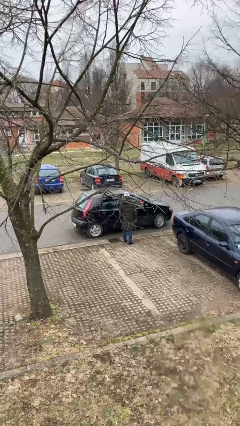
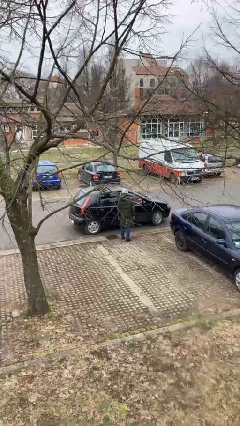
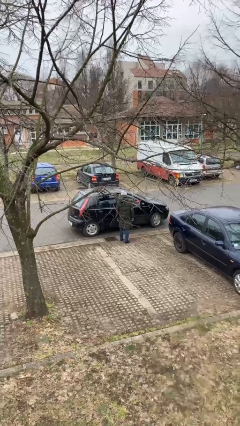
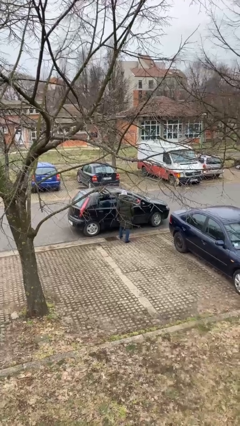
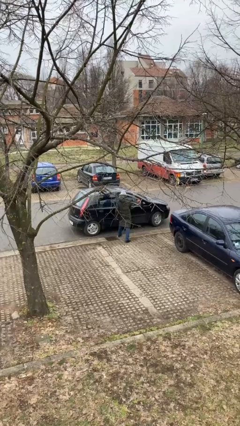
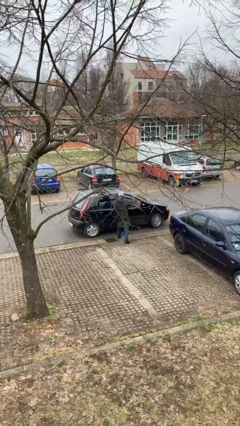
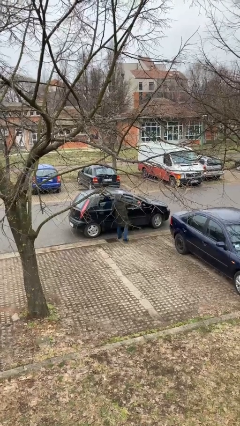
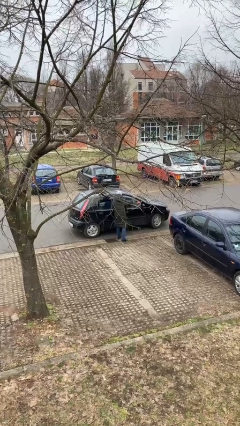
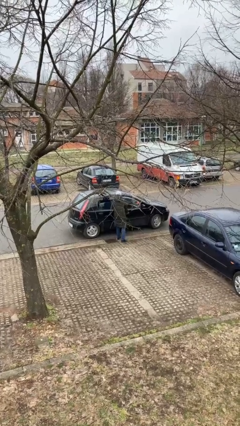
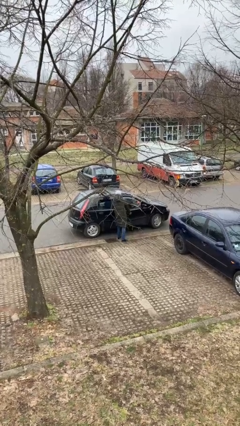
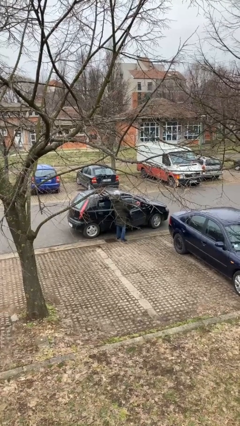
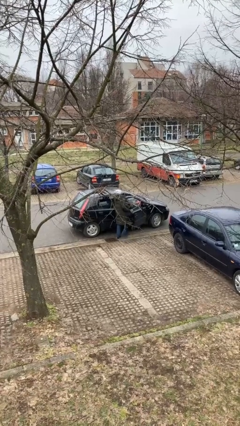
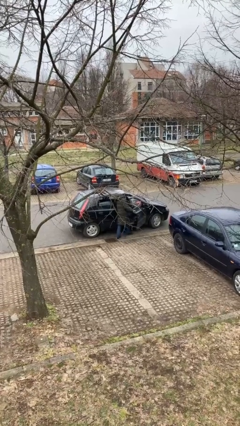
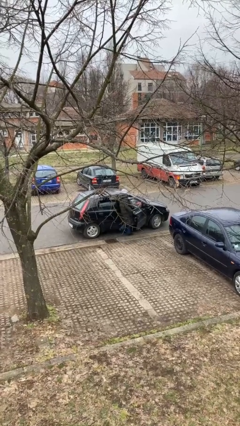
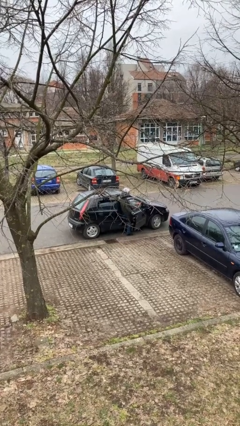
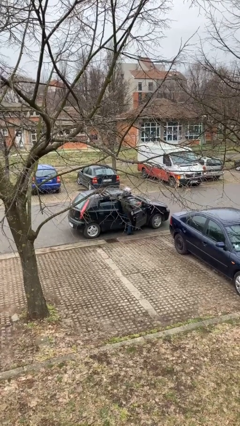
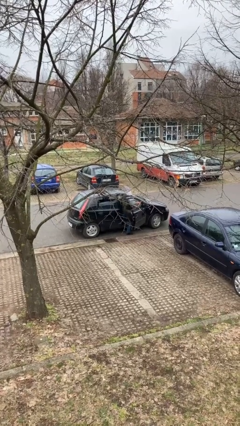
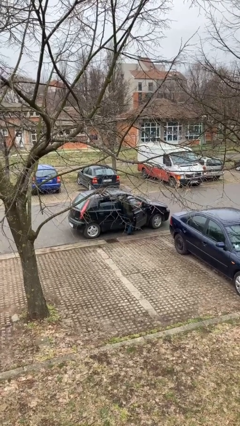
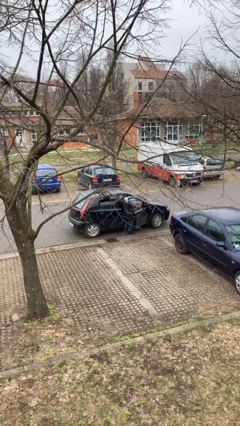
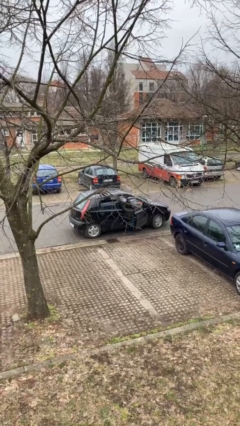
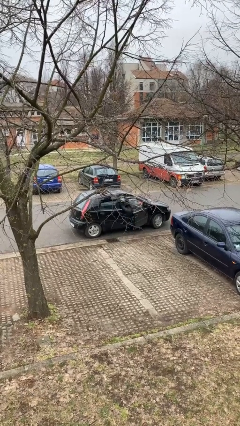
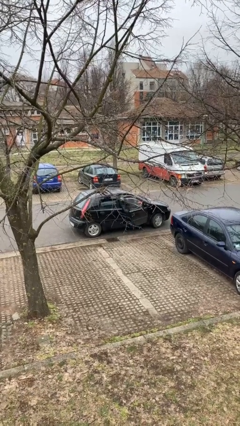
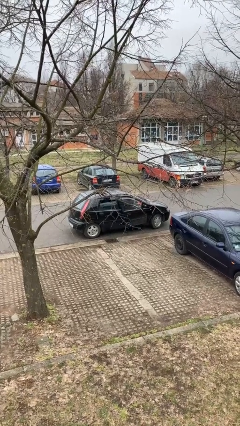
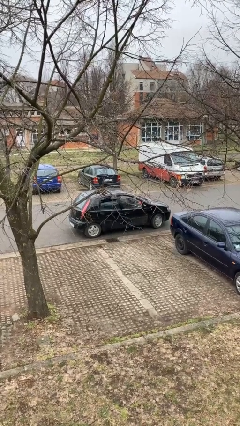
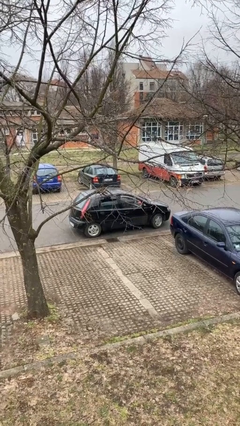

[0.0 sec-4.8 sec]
car picks up person

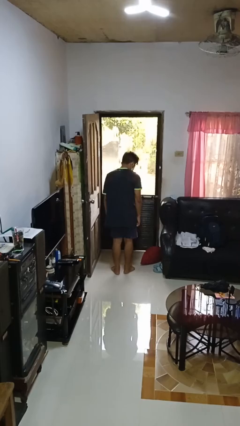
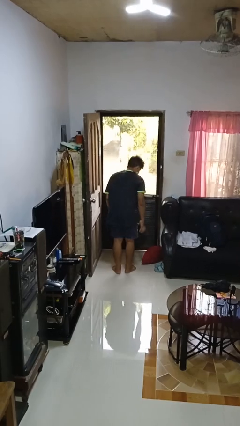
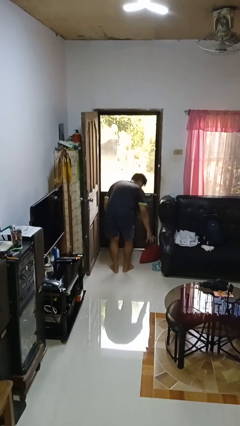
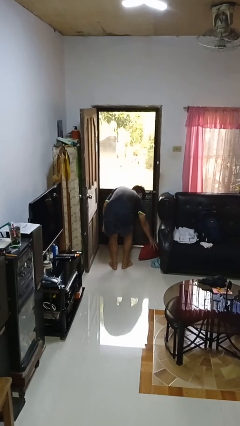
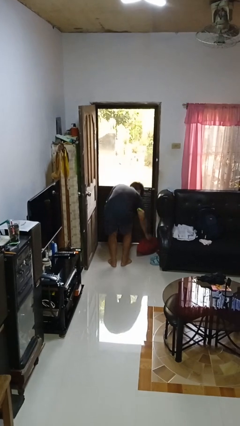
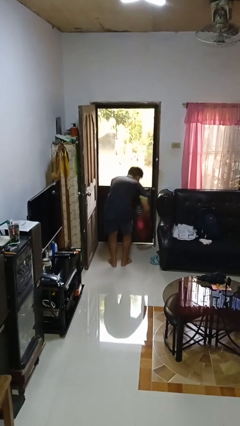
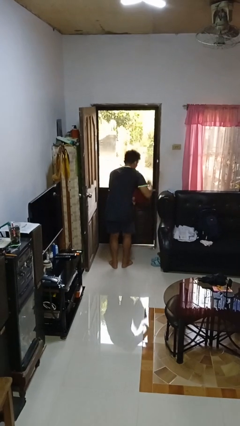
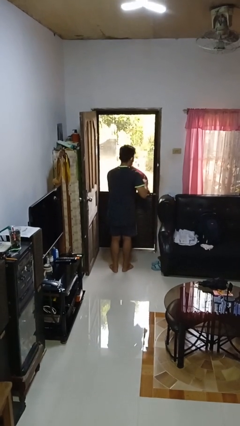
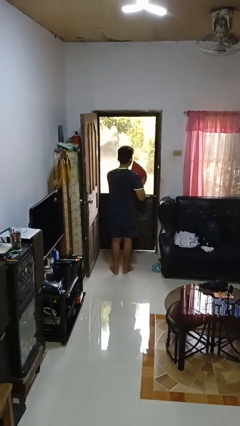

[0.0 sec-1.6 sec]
person picks up object from floor

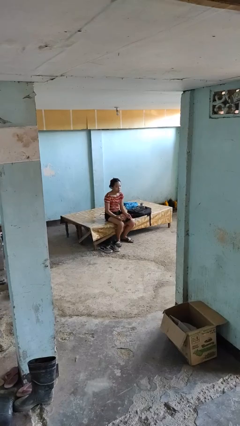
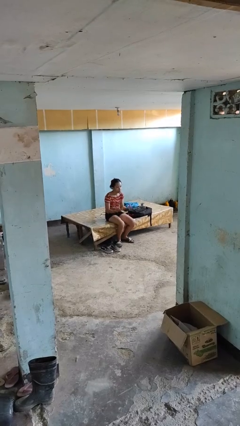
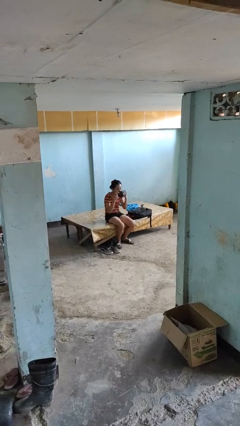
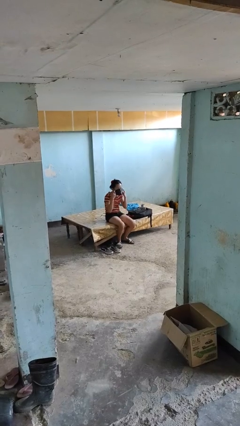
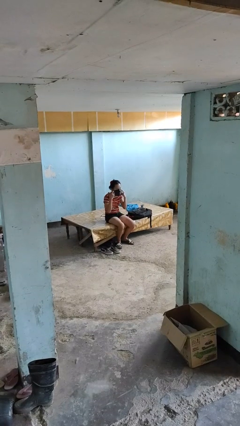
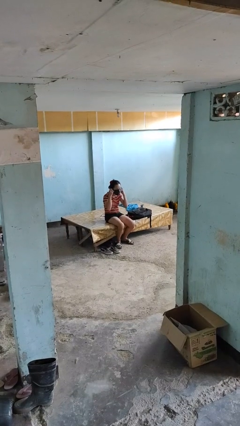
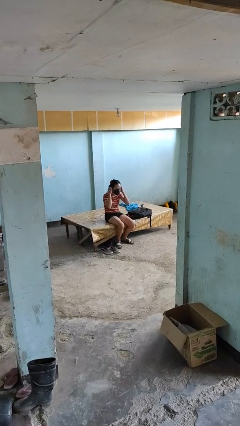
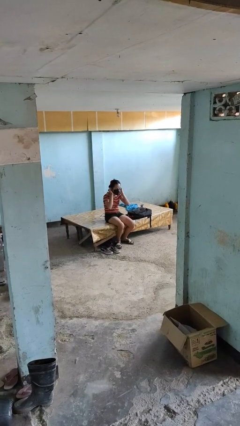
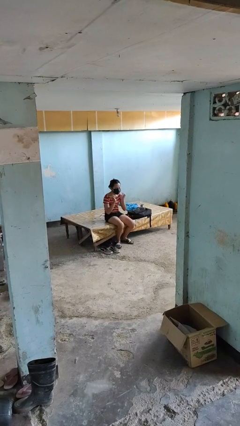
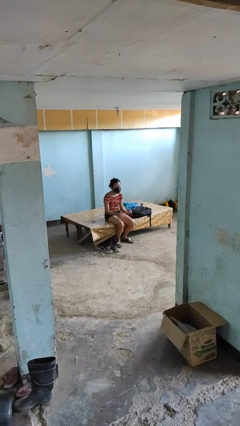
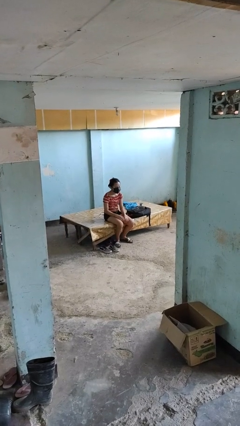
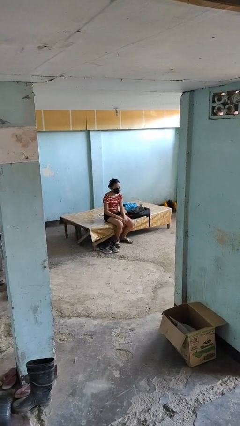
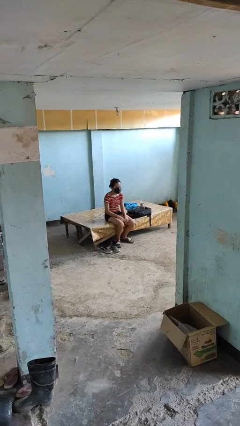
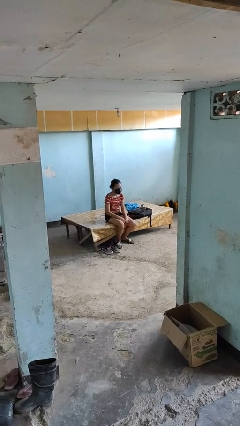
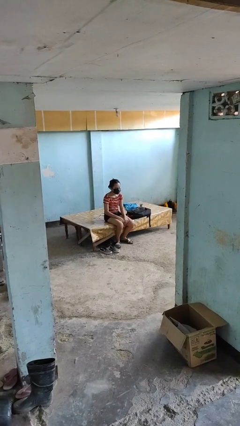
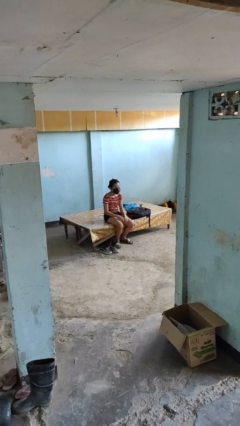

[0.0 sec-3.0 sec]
person puts on facemask

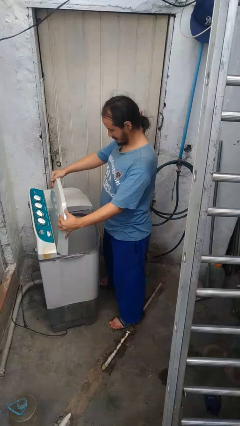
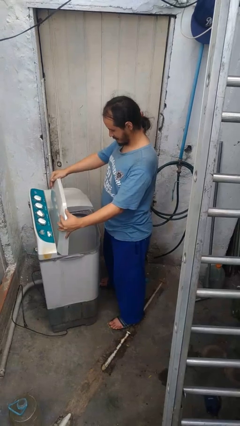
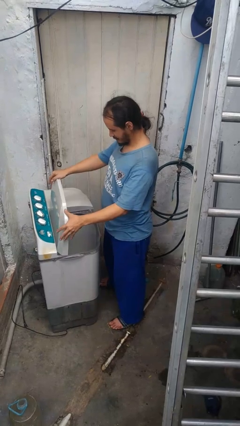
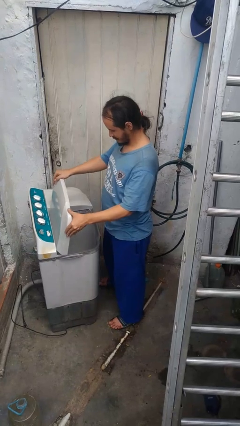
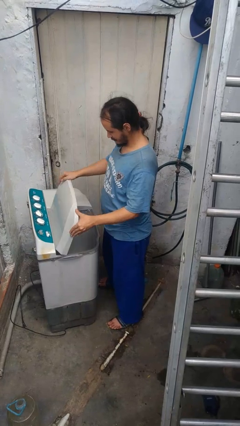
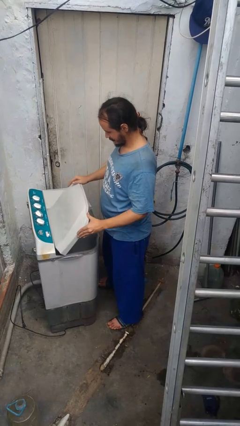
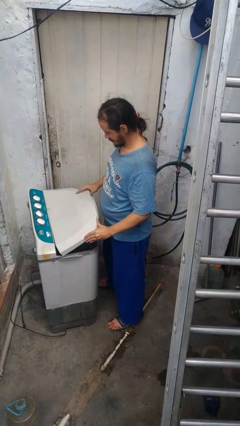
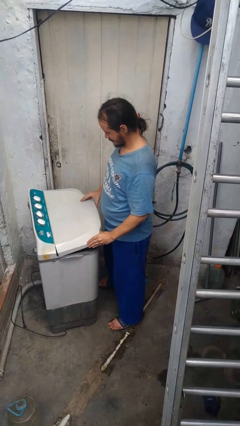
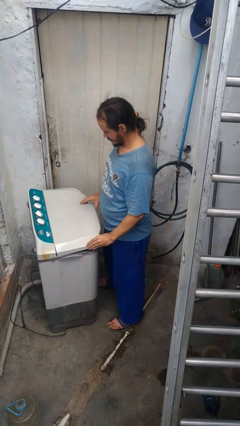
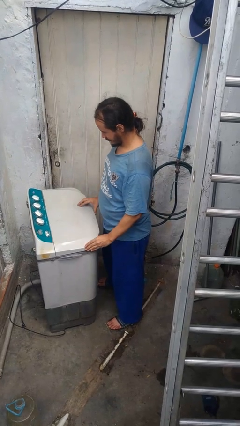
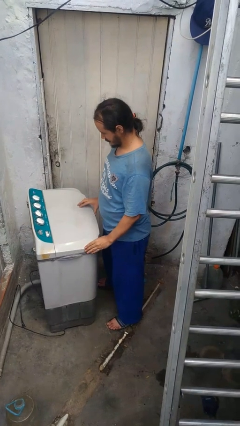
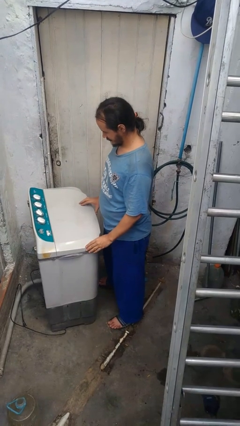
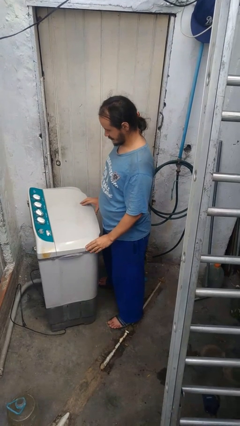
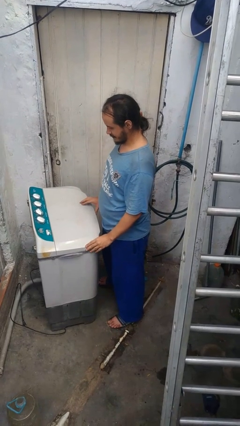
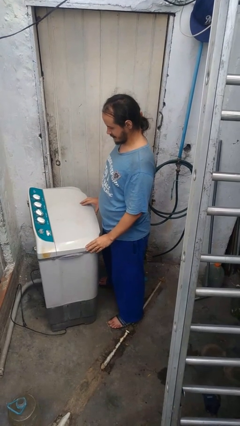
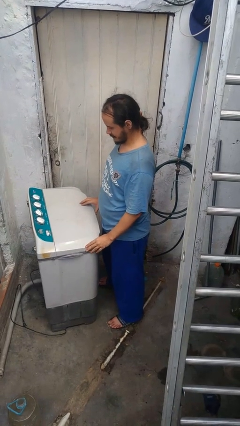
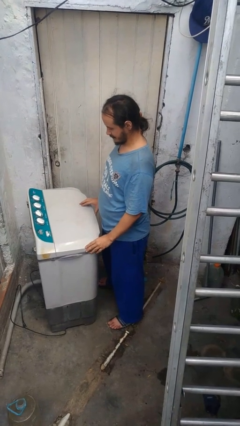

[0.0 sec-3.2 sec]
person closes clothes washer

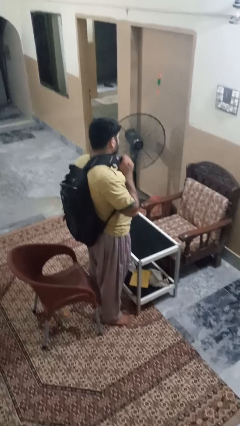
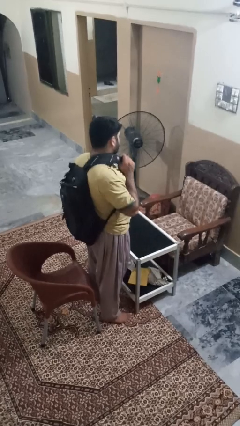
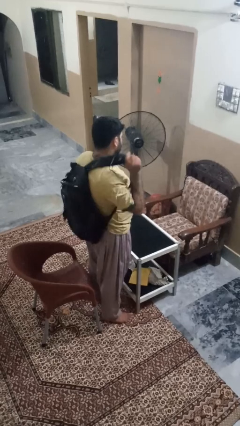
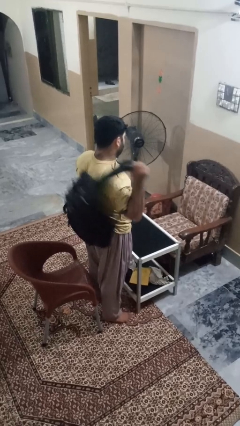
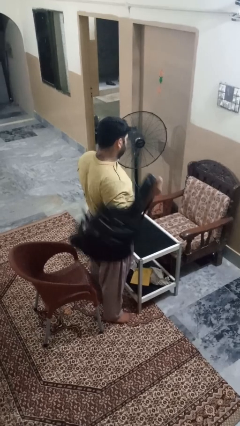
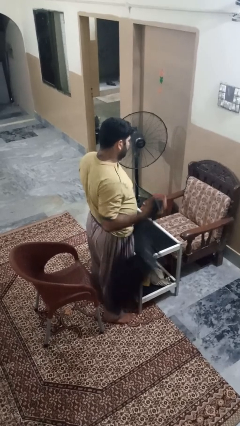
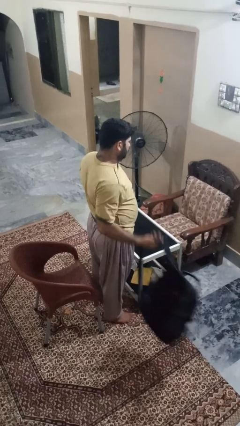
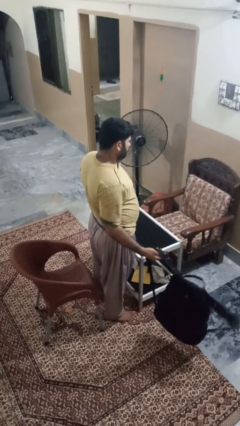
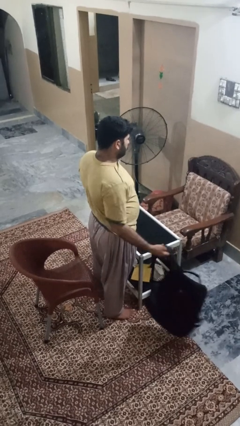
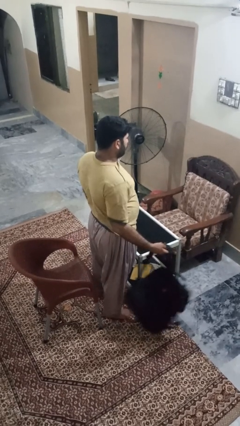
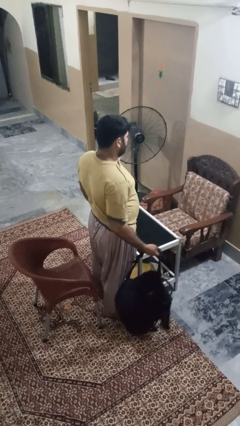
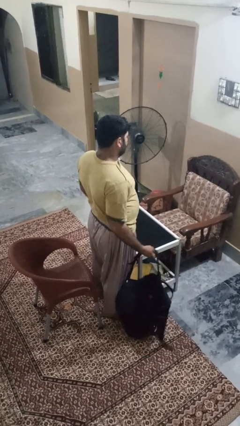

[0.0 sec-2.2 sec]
person takes off backpack

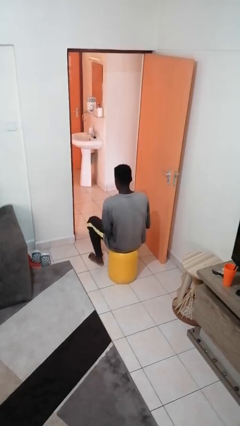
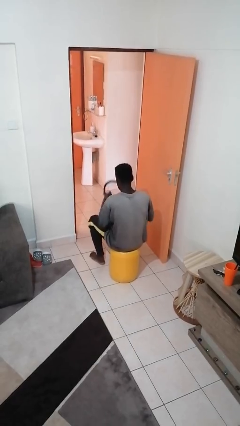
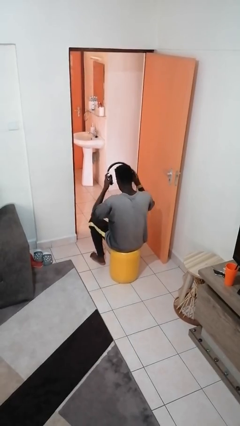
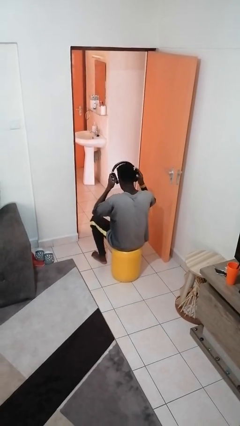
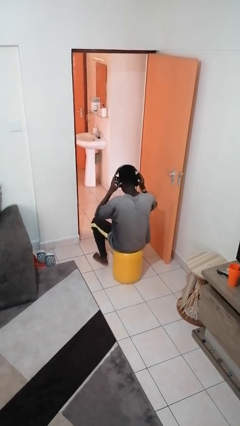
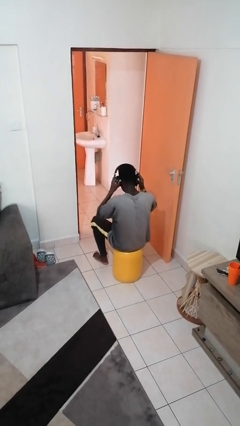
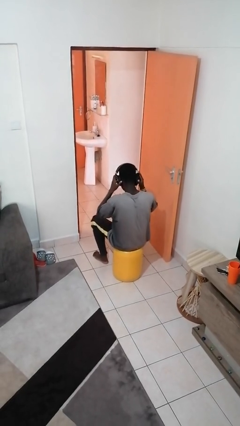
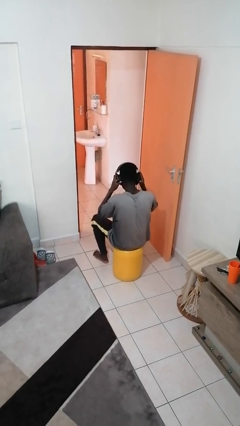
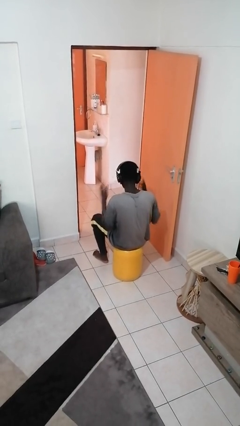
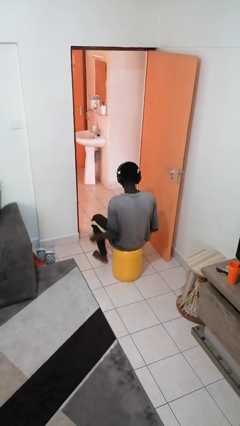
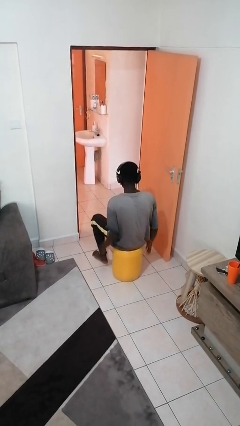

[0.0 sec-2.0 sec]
person puts on headphones

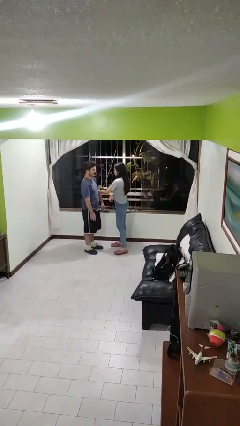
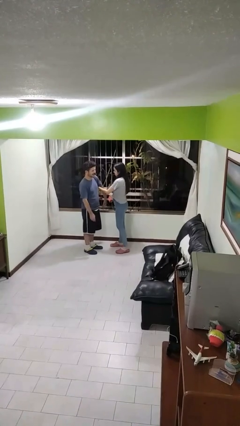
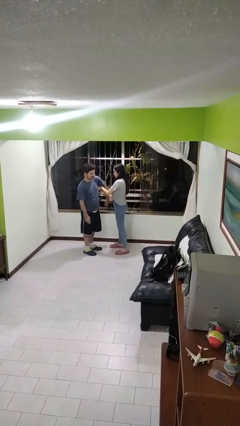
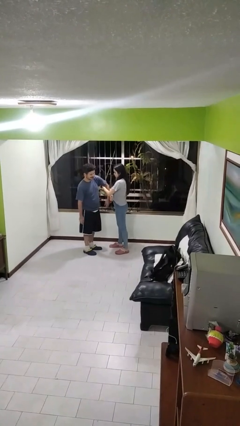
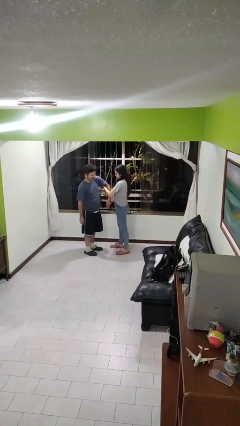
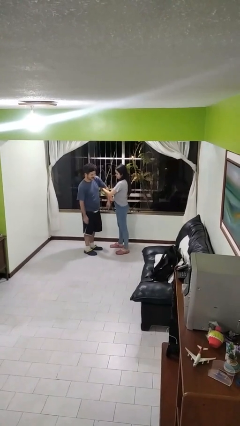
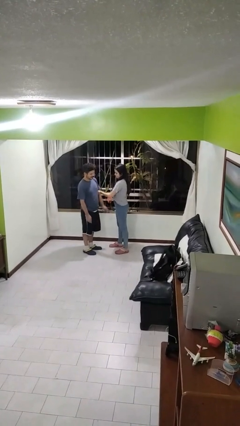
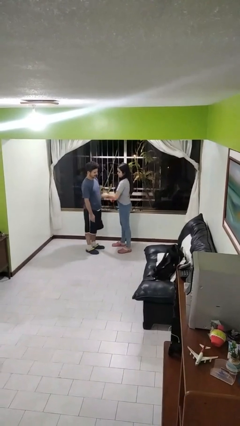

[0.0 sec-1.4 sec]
person grabs person by bicep
